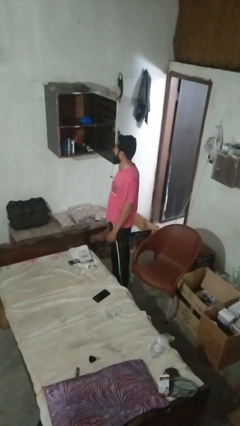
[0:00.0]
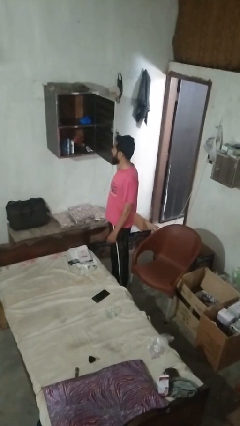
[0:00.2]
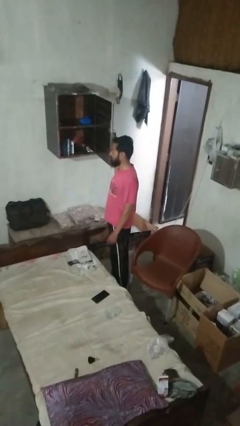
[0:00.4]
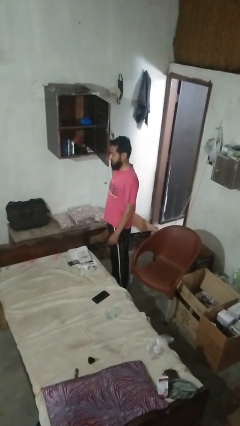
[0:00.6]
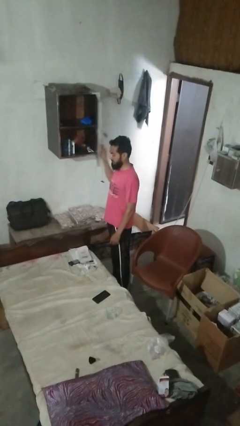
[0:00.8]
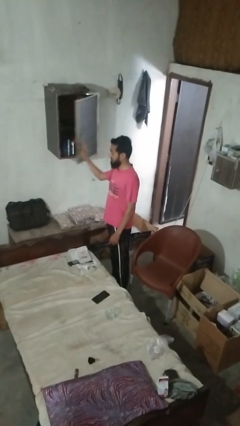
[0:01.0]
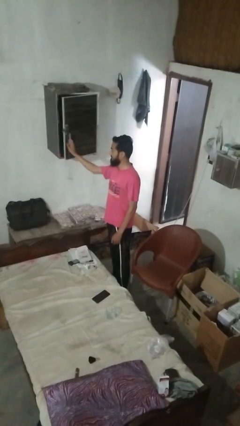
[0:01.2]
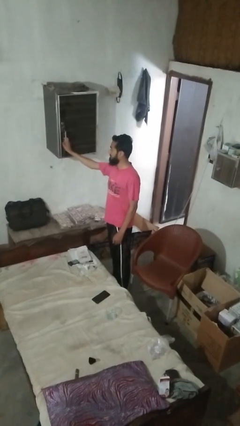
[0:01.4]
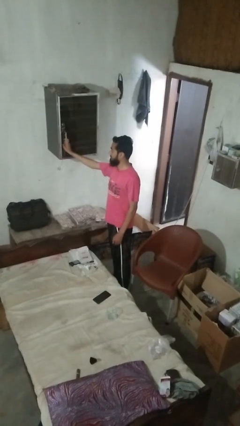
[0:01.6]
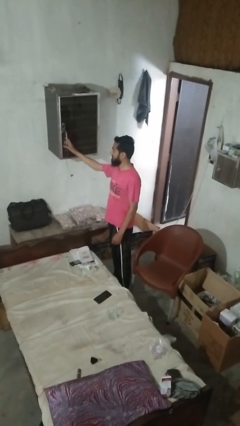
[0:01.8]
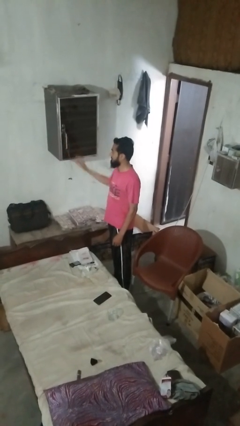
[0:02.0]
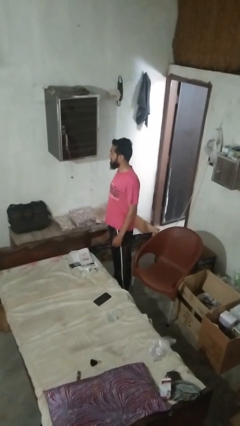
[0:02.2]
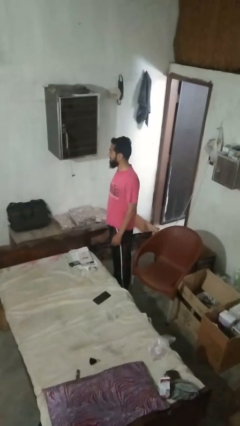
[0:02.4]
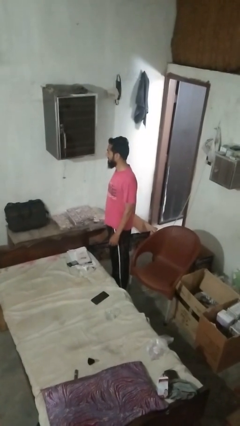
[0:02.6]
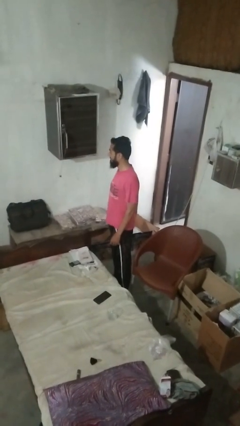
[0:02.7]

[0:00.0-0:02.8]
person closes dresser drawer

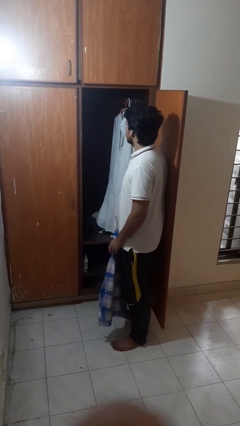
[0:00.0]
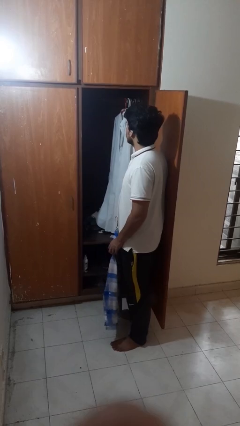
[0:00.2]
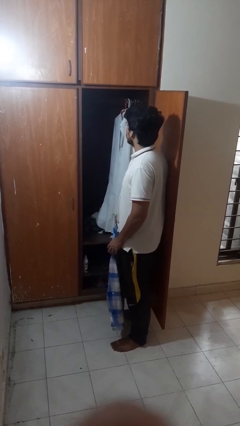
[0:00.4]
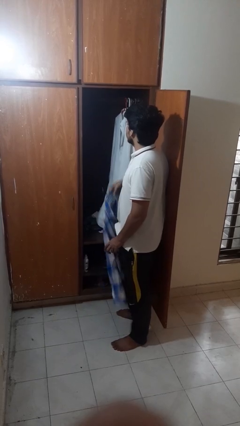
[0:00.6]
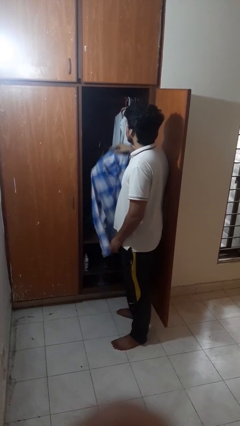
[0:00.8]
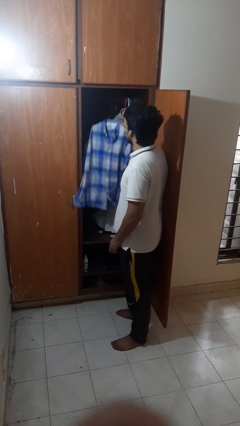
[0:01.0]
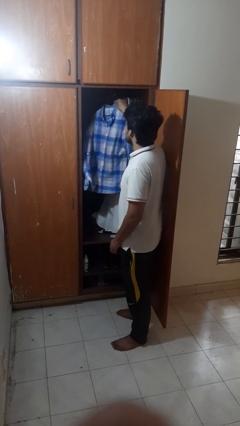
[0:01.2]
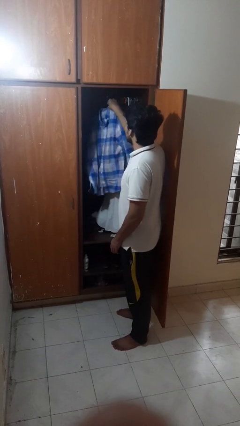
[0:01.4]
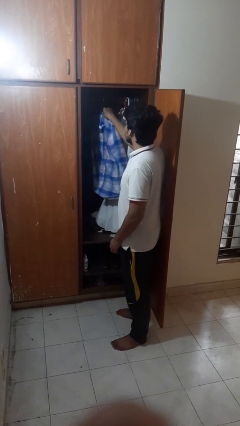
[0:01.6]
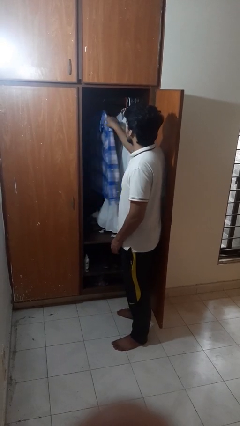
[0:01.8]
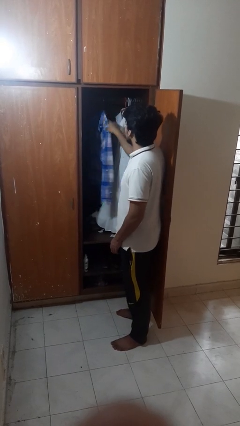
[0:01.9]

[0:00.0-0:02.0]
person puts clothes into closet

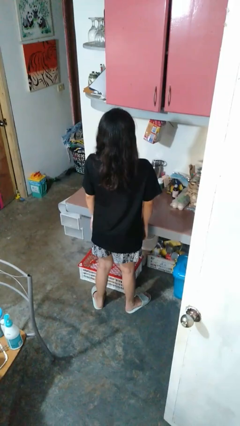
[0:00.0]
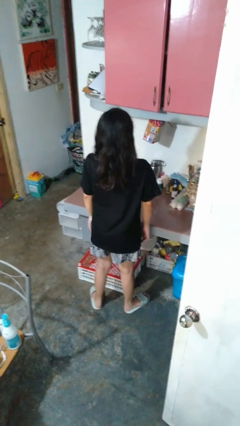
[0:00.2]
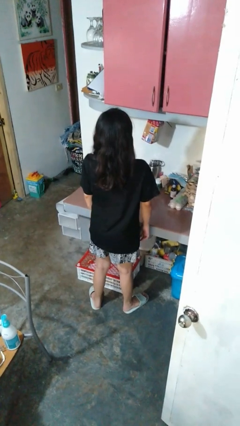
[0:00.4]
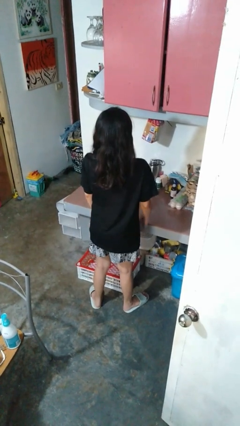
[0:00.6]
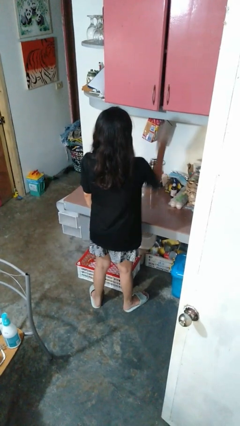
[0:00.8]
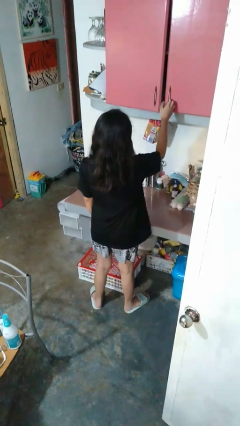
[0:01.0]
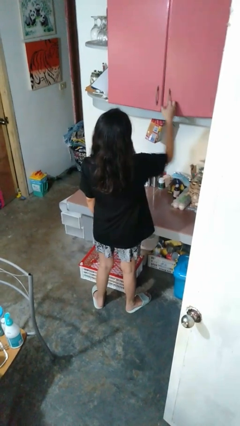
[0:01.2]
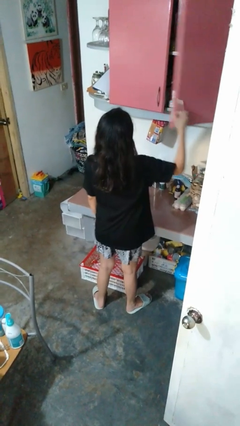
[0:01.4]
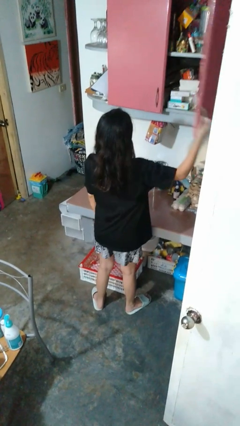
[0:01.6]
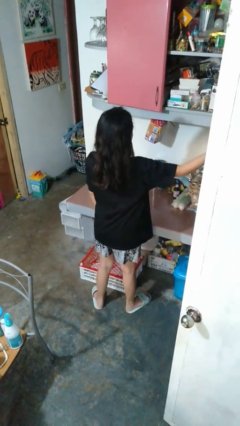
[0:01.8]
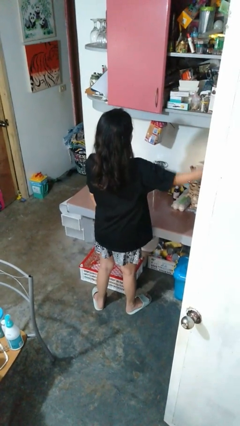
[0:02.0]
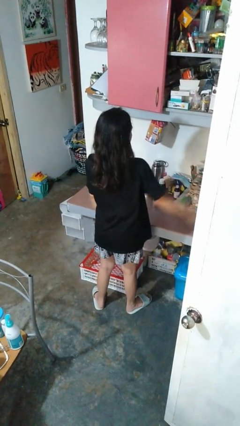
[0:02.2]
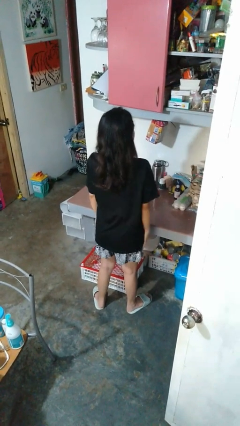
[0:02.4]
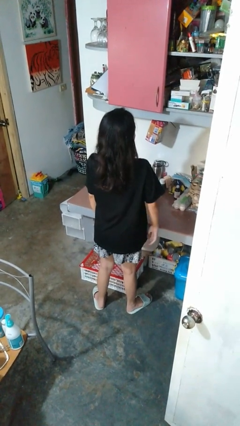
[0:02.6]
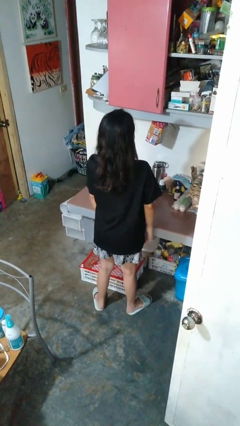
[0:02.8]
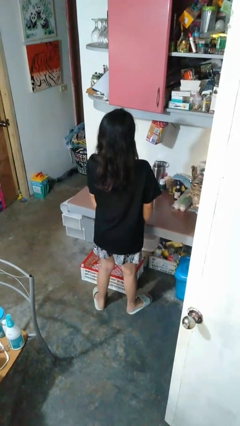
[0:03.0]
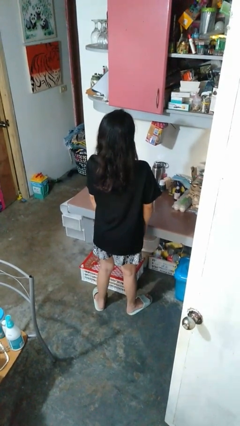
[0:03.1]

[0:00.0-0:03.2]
person opens cabinet

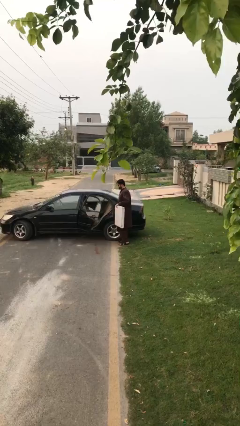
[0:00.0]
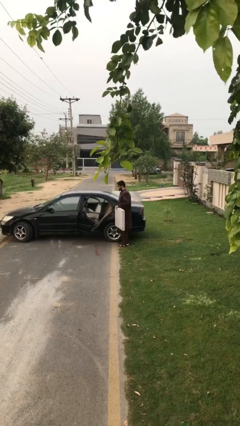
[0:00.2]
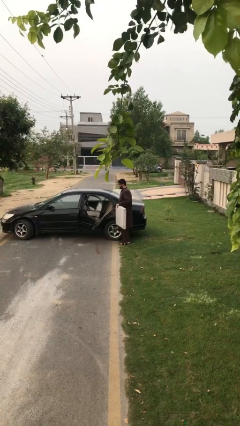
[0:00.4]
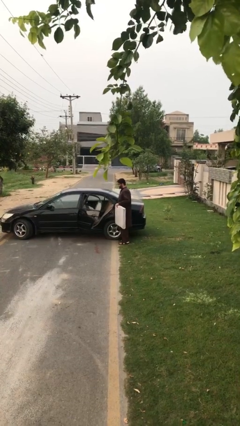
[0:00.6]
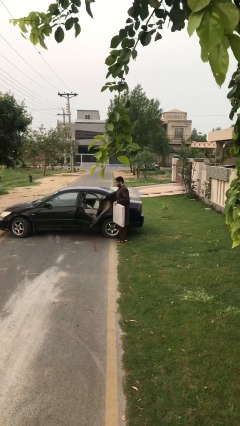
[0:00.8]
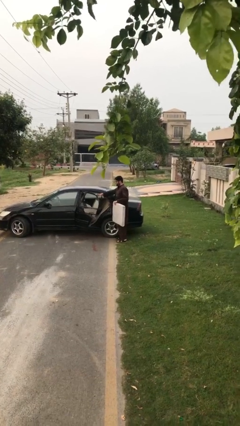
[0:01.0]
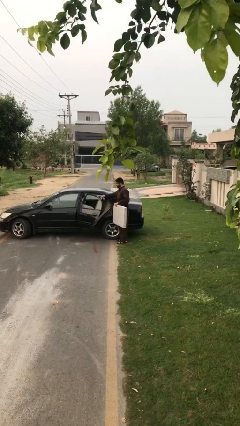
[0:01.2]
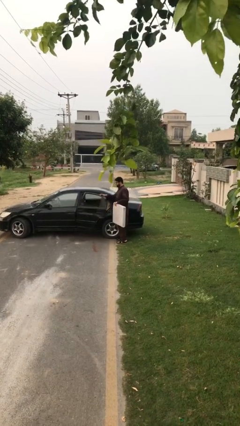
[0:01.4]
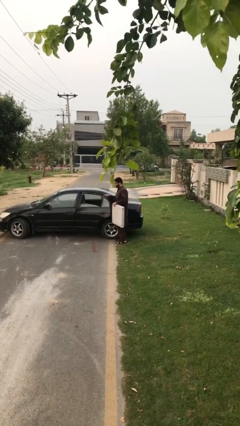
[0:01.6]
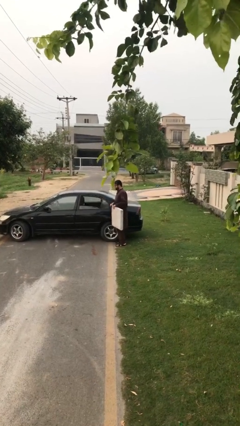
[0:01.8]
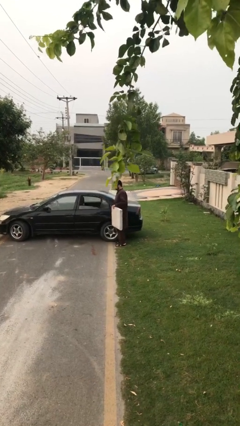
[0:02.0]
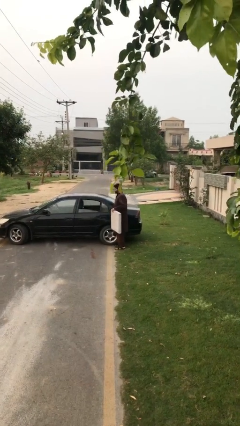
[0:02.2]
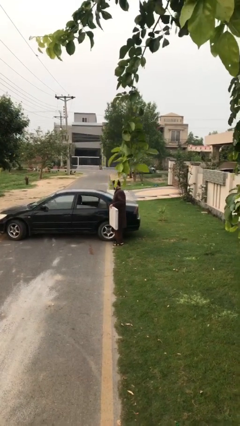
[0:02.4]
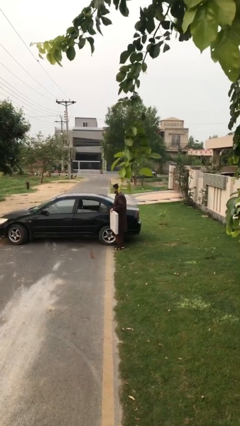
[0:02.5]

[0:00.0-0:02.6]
person closes car door

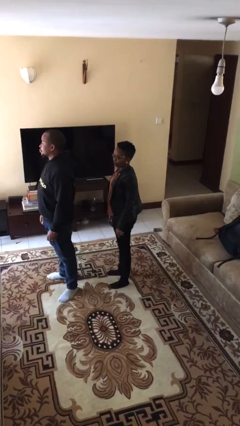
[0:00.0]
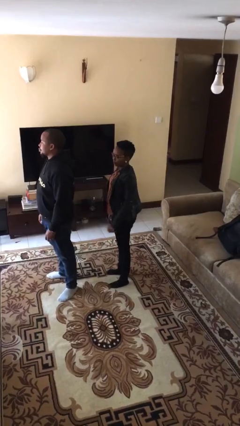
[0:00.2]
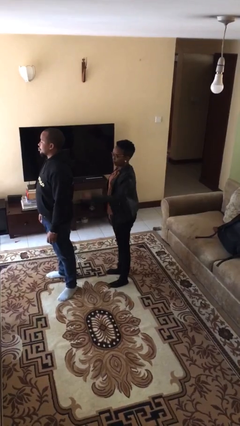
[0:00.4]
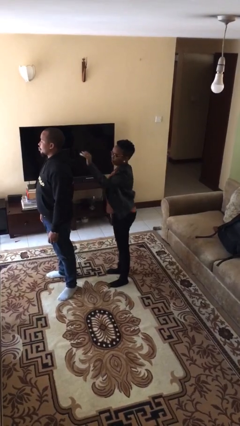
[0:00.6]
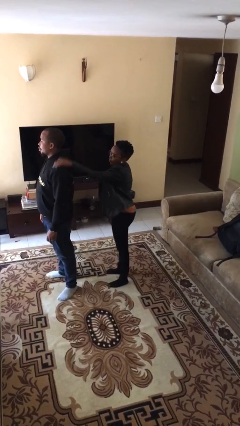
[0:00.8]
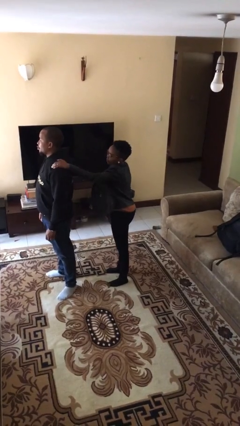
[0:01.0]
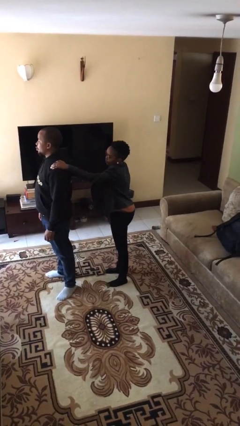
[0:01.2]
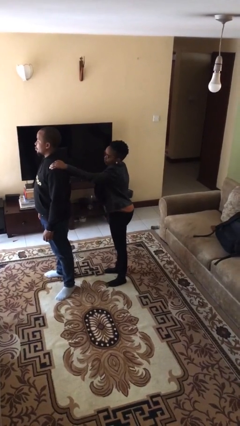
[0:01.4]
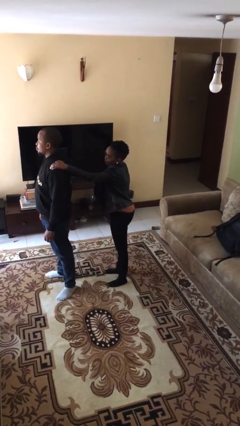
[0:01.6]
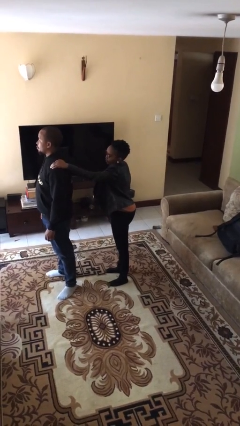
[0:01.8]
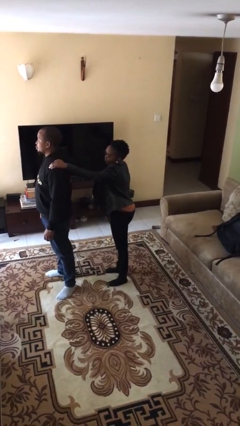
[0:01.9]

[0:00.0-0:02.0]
person grabs person by shoulder

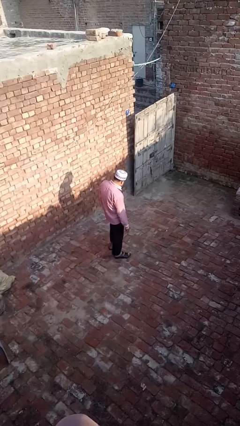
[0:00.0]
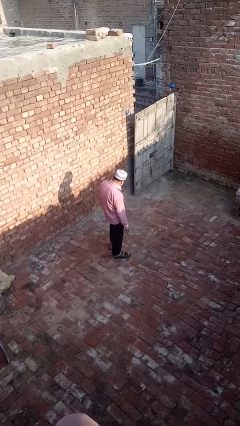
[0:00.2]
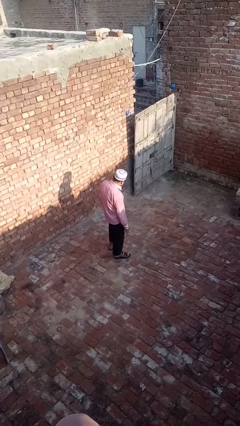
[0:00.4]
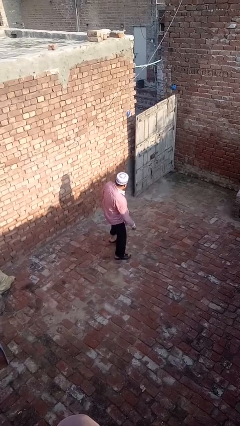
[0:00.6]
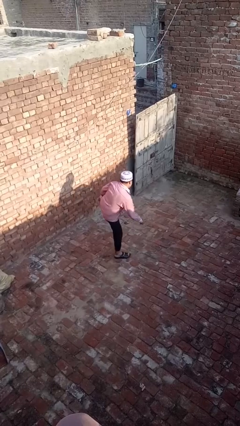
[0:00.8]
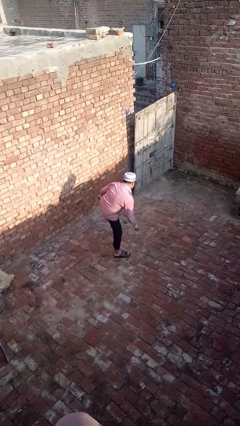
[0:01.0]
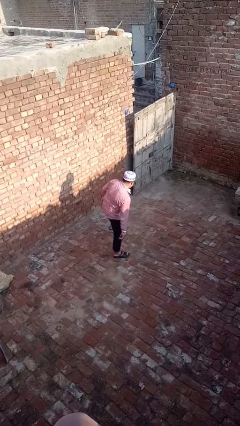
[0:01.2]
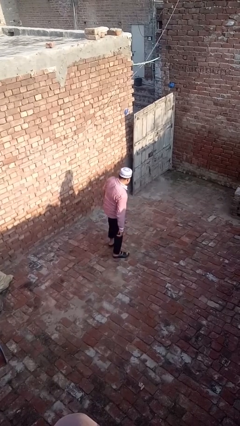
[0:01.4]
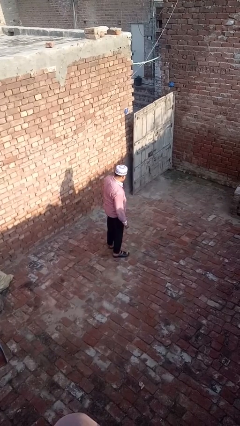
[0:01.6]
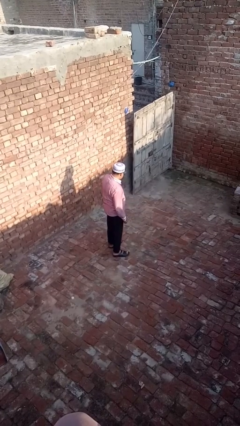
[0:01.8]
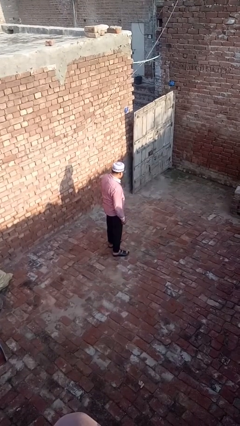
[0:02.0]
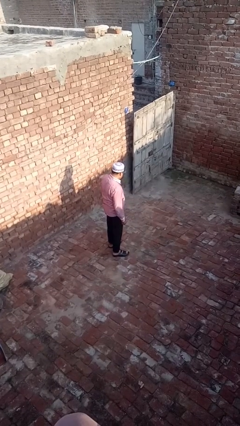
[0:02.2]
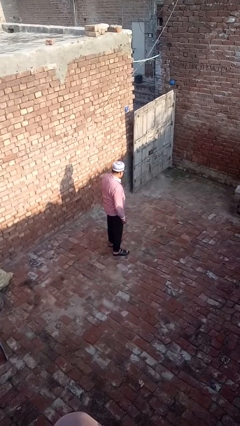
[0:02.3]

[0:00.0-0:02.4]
person karate kicks

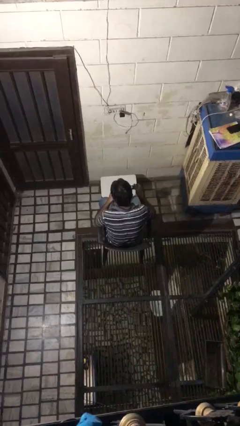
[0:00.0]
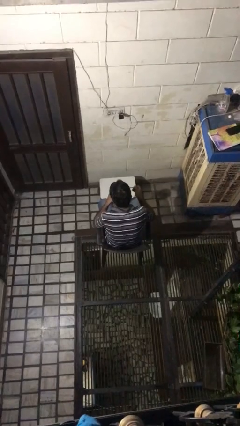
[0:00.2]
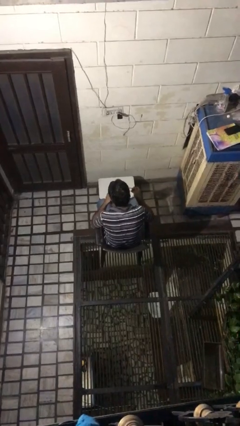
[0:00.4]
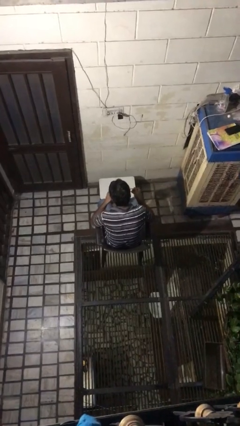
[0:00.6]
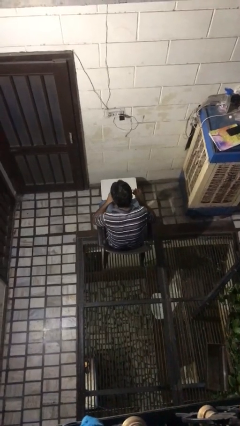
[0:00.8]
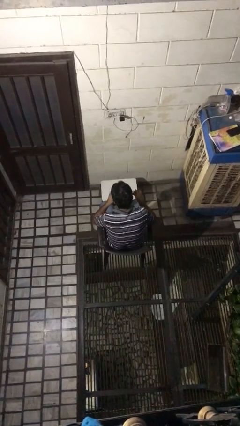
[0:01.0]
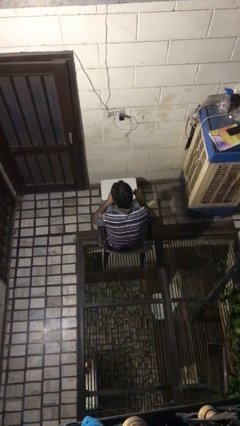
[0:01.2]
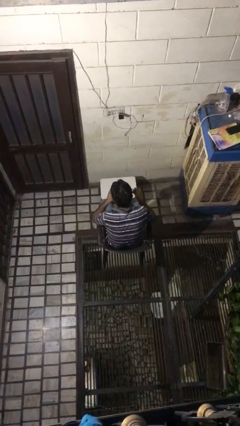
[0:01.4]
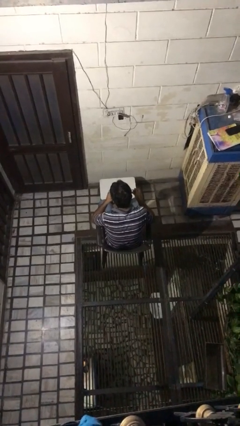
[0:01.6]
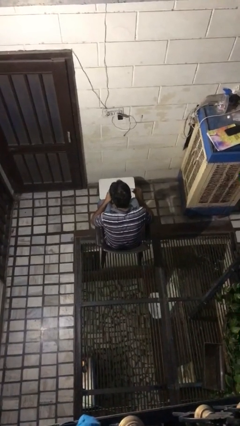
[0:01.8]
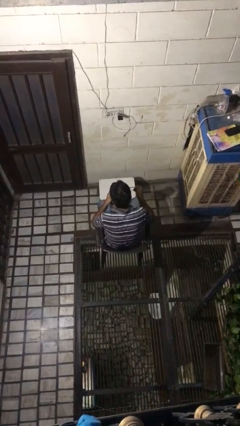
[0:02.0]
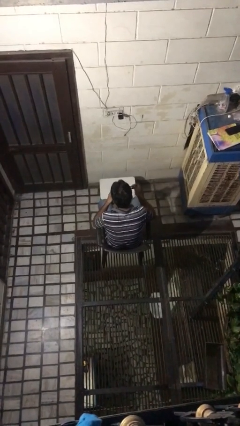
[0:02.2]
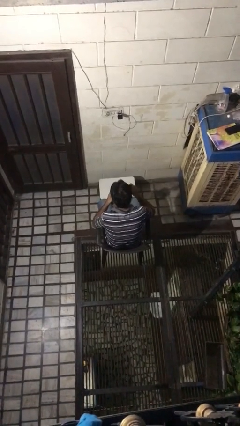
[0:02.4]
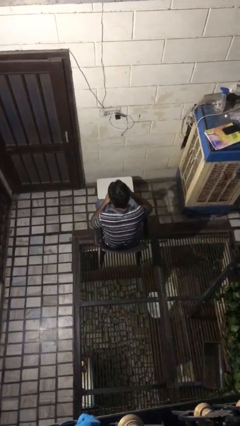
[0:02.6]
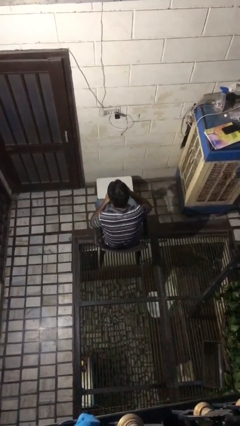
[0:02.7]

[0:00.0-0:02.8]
person drinks from mug
